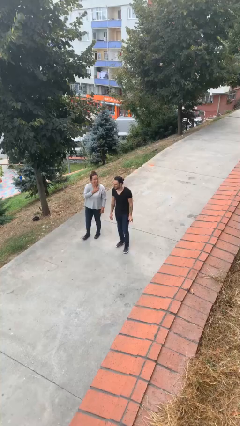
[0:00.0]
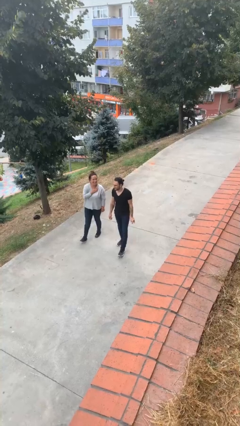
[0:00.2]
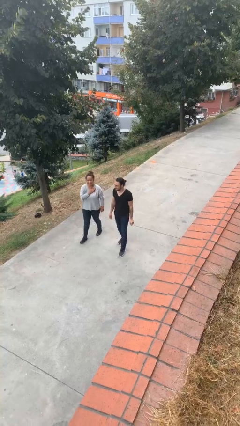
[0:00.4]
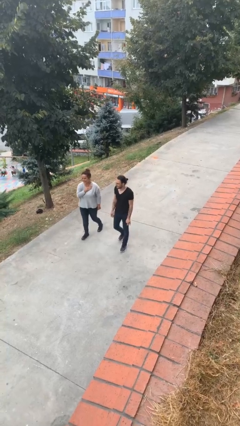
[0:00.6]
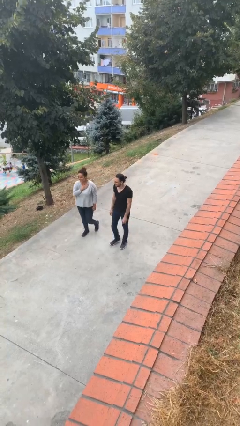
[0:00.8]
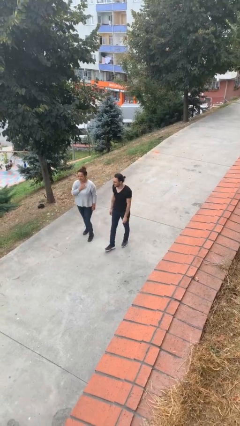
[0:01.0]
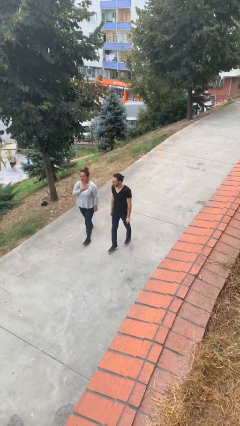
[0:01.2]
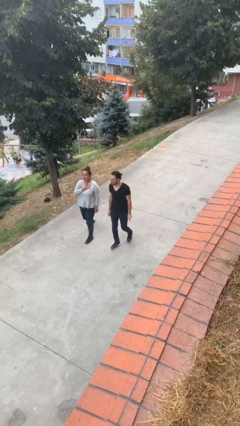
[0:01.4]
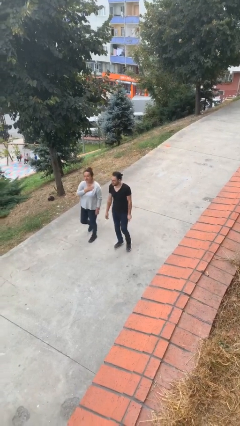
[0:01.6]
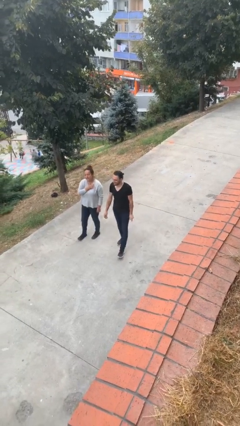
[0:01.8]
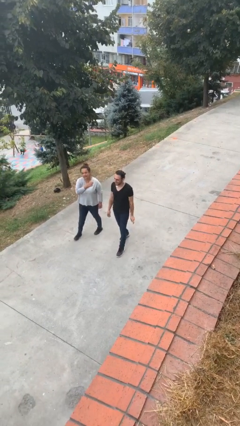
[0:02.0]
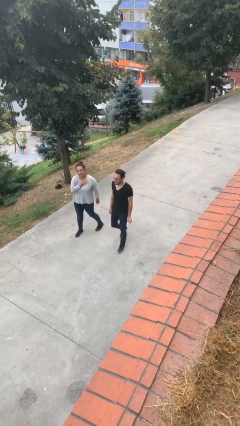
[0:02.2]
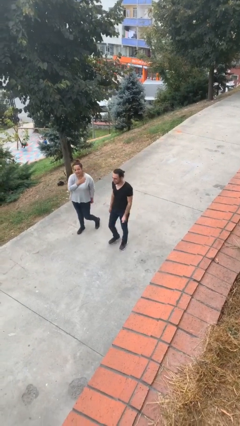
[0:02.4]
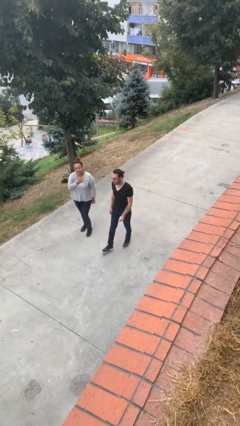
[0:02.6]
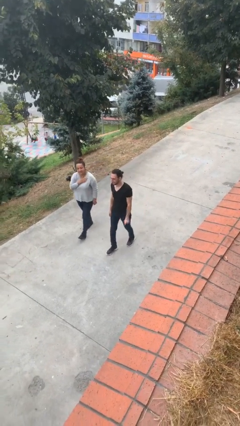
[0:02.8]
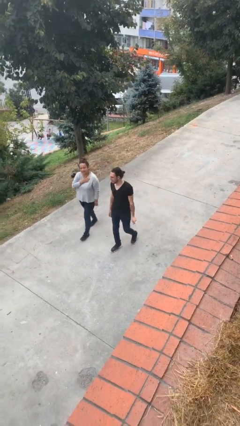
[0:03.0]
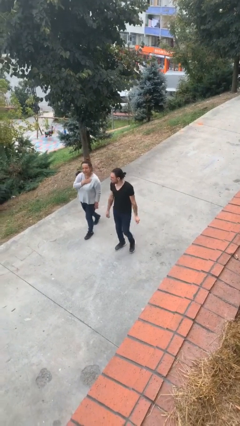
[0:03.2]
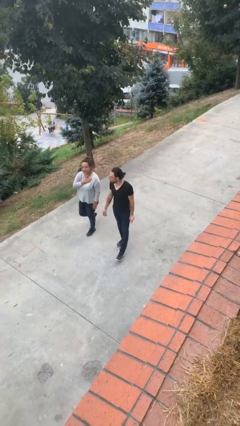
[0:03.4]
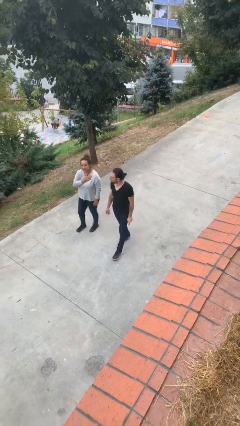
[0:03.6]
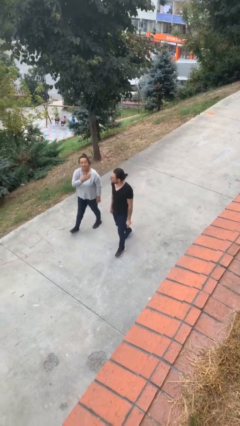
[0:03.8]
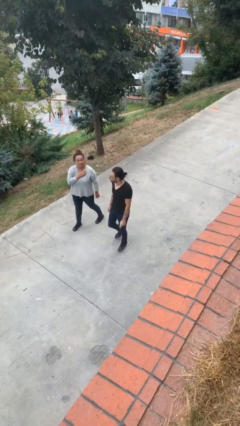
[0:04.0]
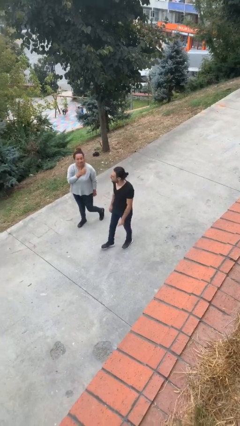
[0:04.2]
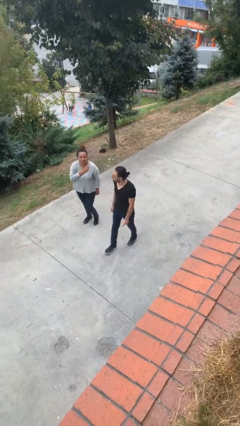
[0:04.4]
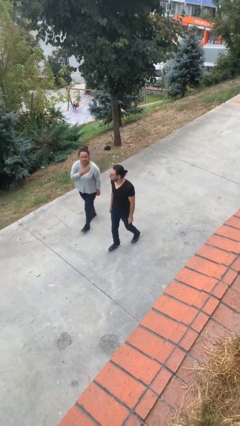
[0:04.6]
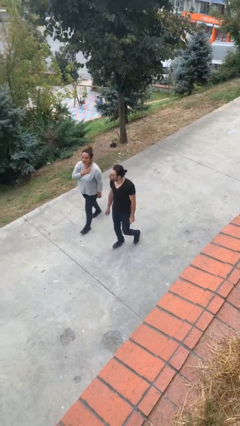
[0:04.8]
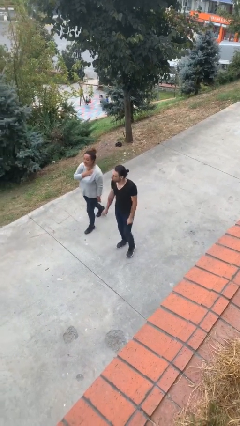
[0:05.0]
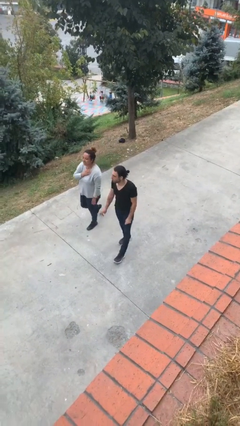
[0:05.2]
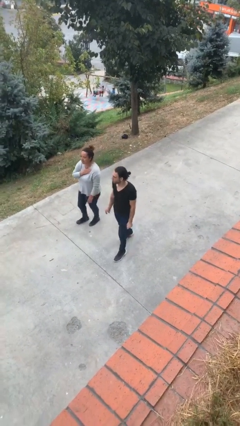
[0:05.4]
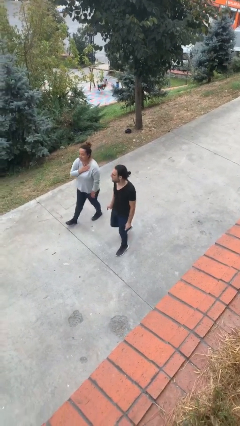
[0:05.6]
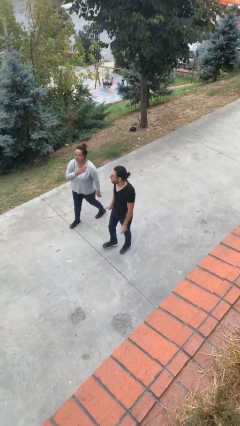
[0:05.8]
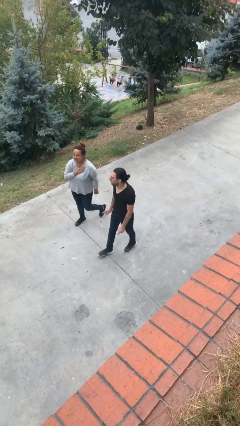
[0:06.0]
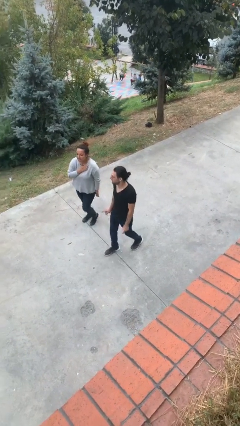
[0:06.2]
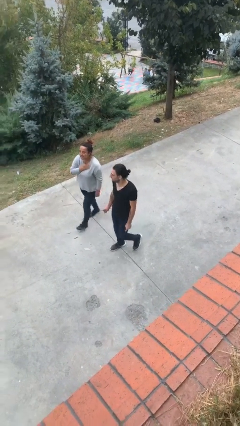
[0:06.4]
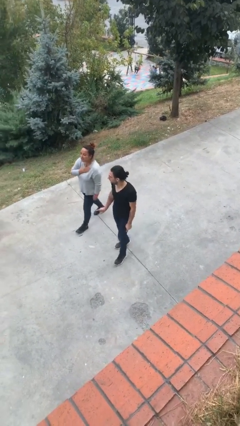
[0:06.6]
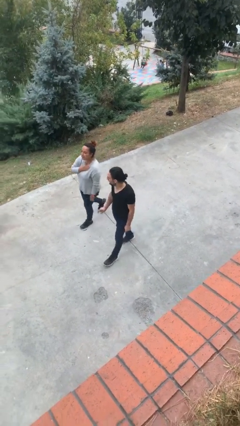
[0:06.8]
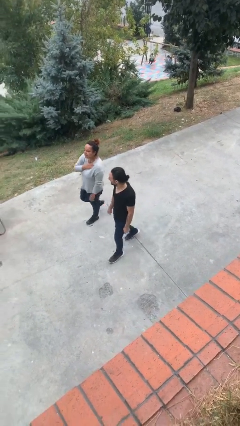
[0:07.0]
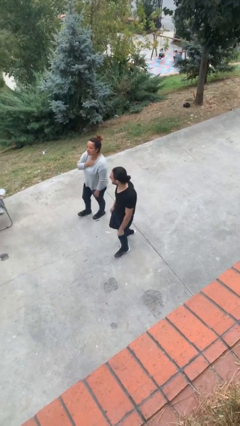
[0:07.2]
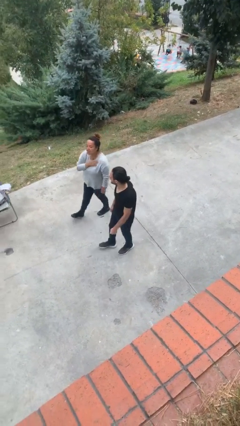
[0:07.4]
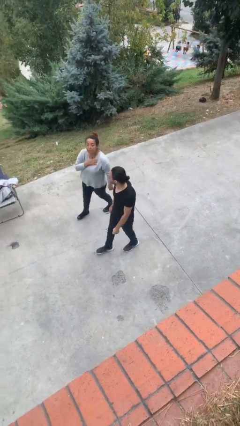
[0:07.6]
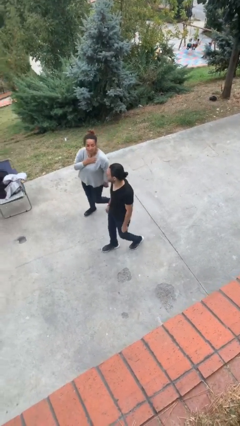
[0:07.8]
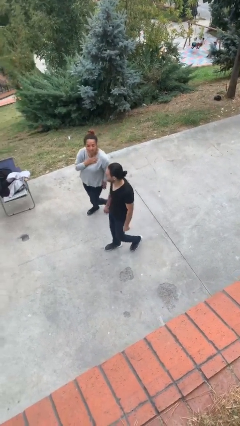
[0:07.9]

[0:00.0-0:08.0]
person talks to person

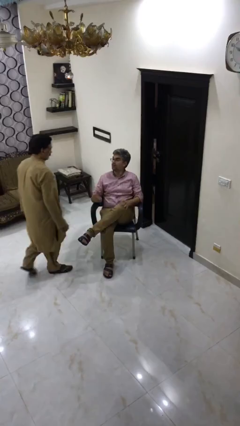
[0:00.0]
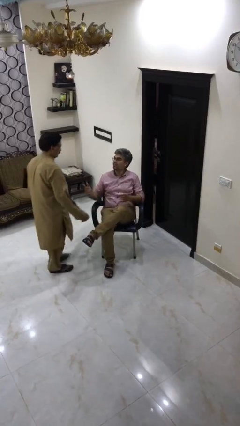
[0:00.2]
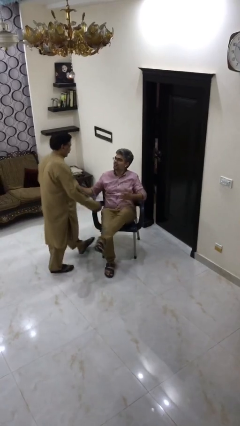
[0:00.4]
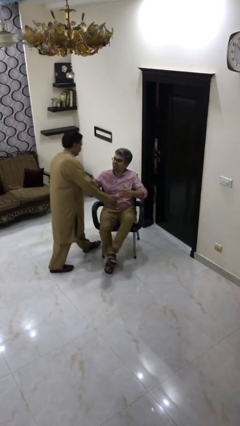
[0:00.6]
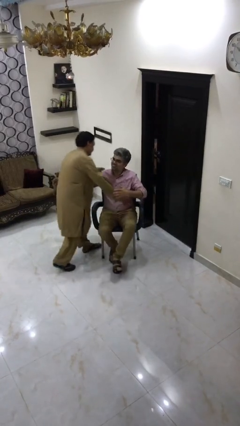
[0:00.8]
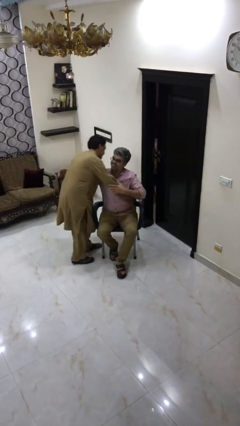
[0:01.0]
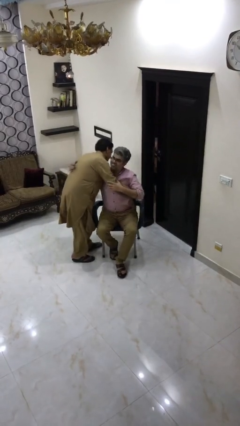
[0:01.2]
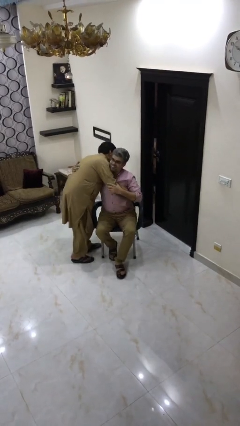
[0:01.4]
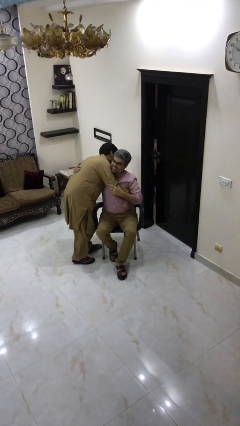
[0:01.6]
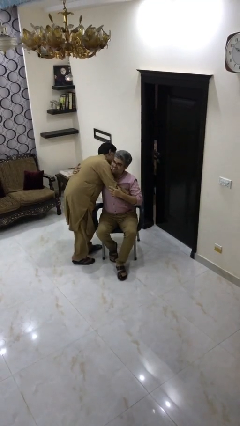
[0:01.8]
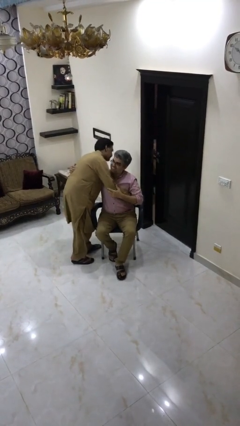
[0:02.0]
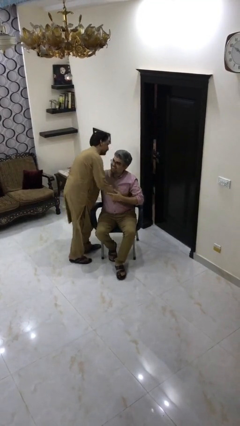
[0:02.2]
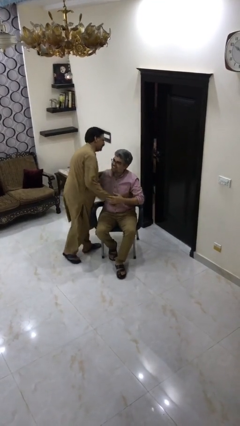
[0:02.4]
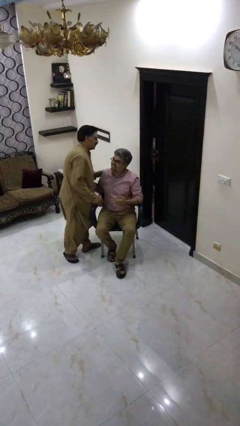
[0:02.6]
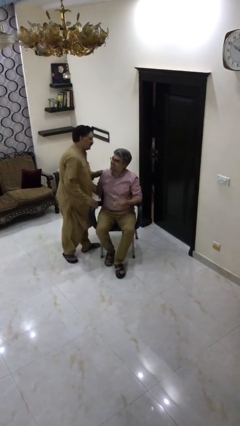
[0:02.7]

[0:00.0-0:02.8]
person embraces person

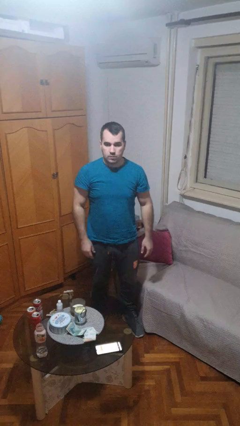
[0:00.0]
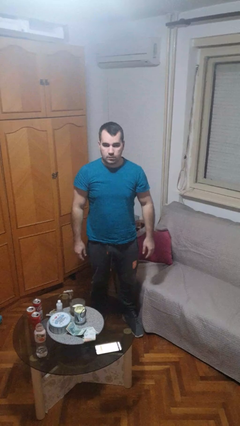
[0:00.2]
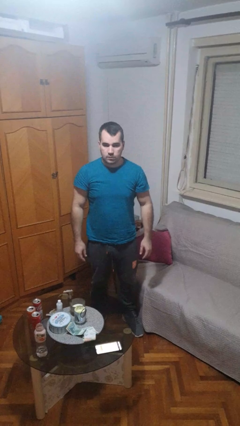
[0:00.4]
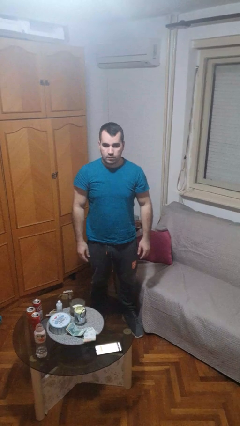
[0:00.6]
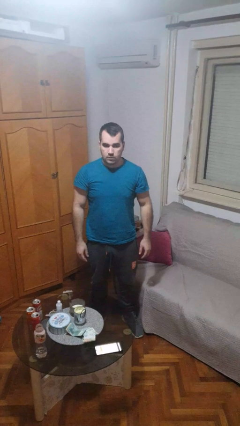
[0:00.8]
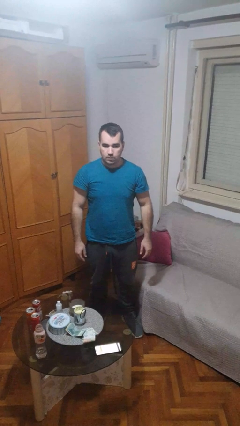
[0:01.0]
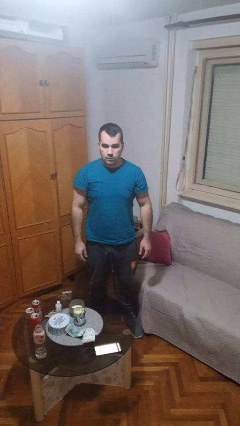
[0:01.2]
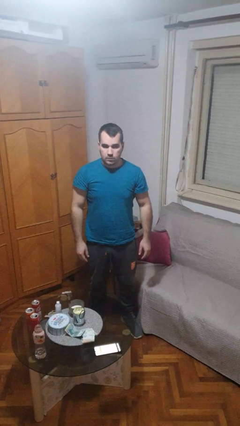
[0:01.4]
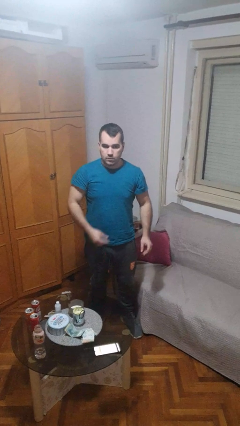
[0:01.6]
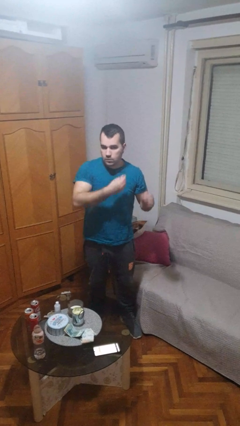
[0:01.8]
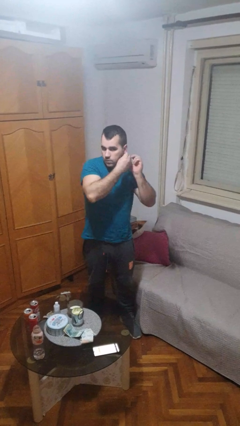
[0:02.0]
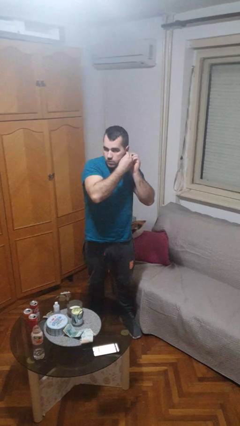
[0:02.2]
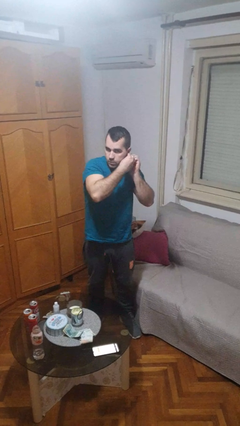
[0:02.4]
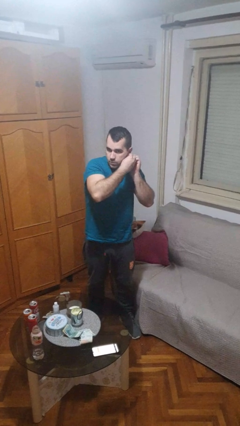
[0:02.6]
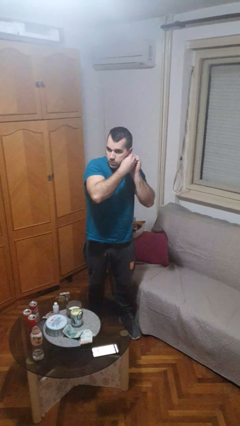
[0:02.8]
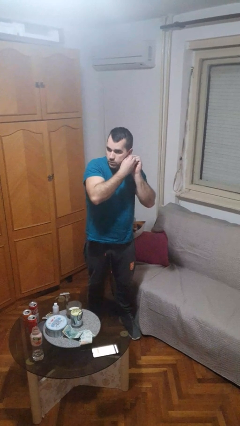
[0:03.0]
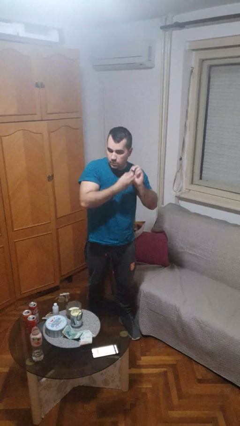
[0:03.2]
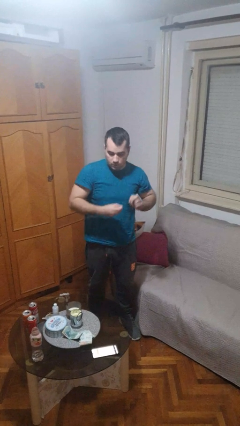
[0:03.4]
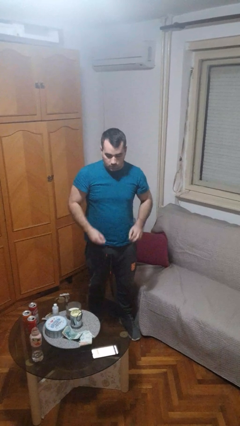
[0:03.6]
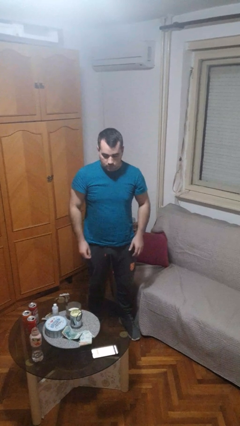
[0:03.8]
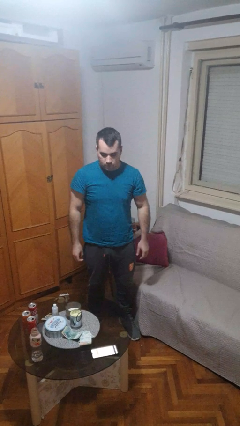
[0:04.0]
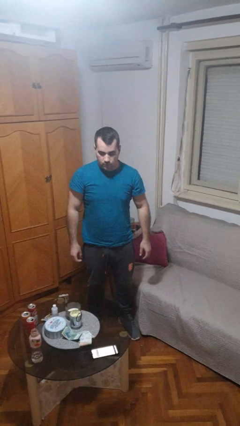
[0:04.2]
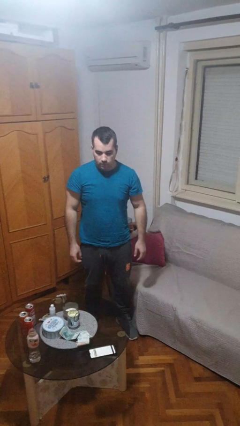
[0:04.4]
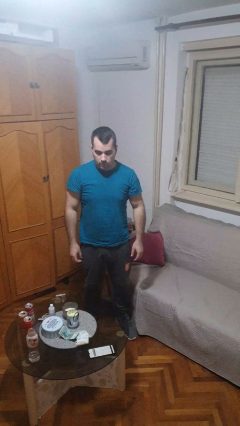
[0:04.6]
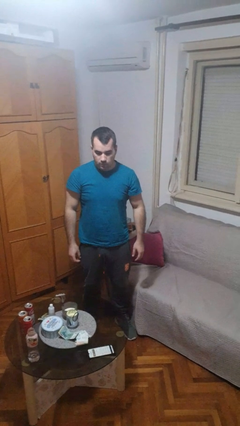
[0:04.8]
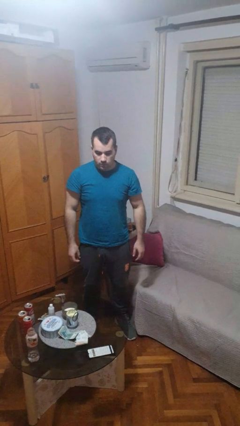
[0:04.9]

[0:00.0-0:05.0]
person takes off earrings

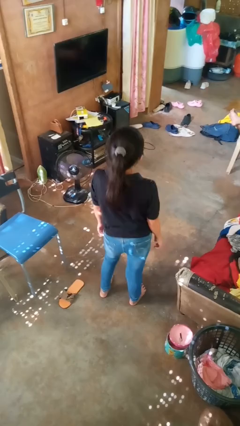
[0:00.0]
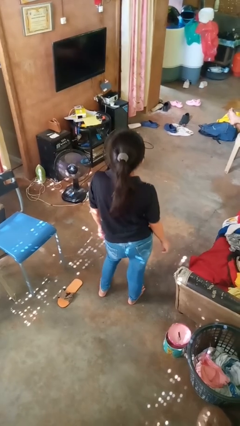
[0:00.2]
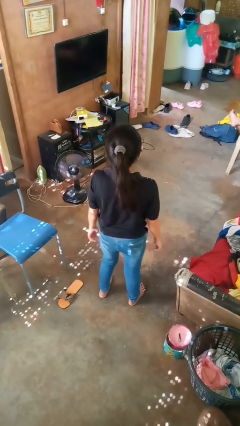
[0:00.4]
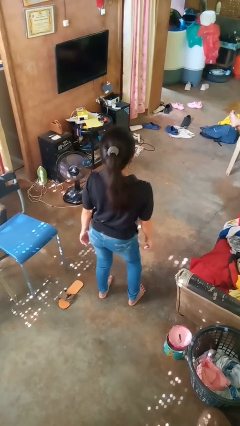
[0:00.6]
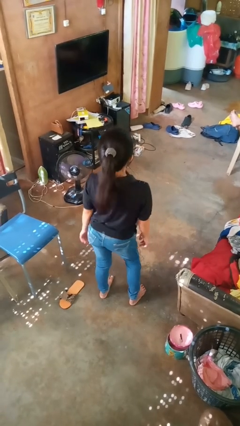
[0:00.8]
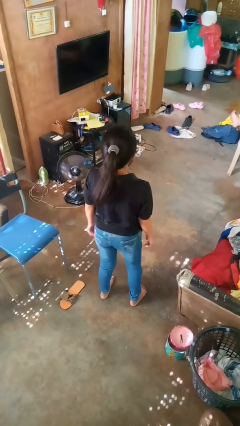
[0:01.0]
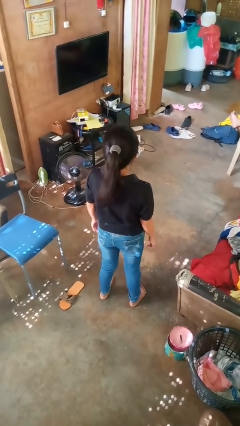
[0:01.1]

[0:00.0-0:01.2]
person wiggles hips

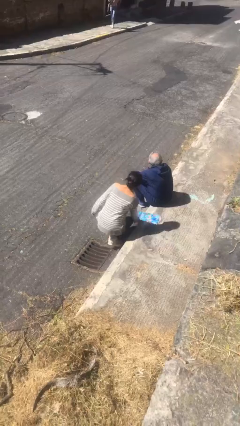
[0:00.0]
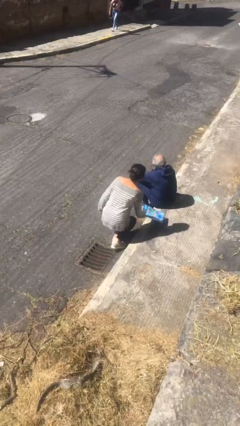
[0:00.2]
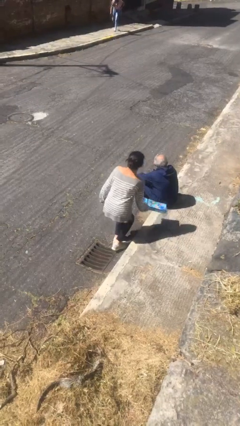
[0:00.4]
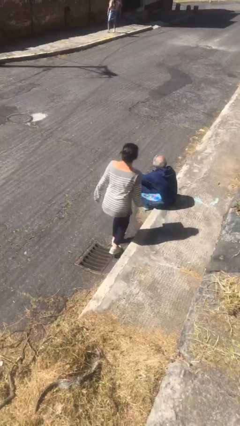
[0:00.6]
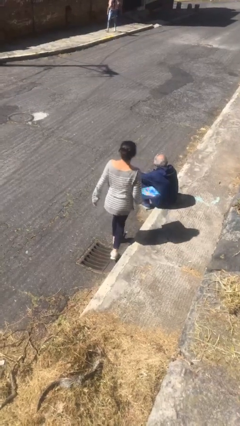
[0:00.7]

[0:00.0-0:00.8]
person steals object from person
